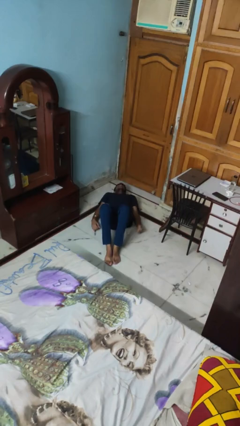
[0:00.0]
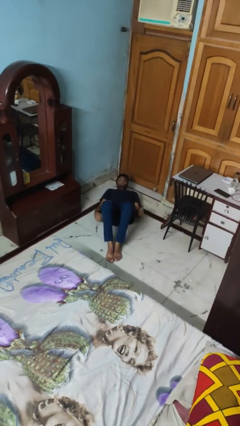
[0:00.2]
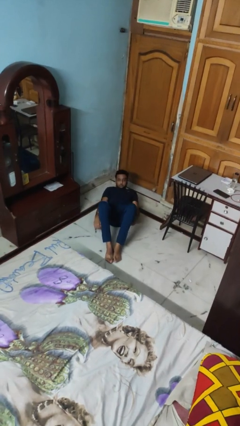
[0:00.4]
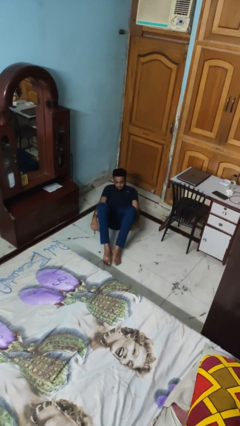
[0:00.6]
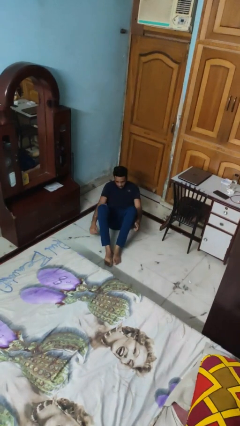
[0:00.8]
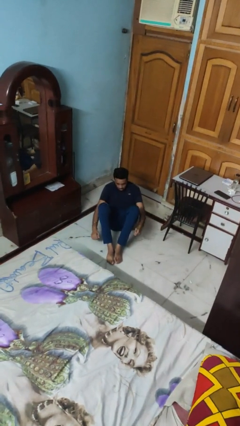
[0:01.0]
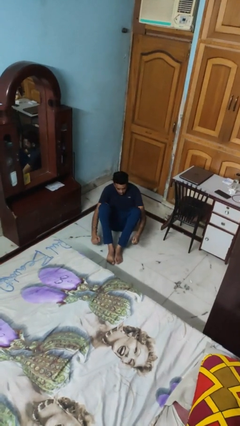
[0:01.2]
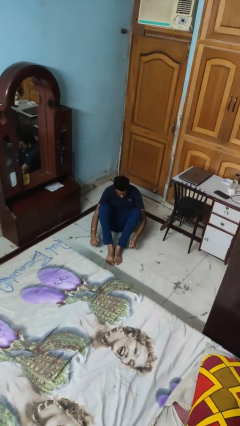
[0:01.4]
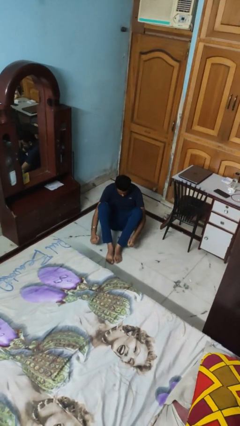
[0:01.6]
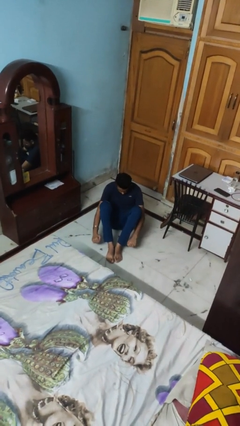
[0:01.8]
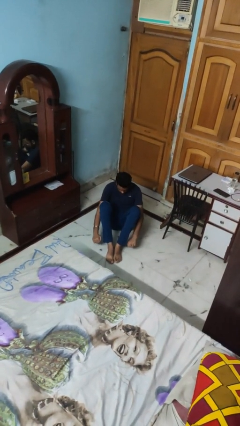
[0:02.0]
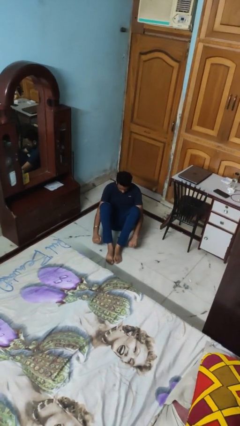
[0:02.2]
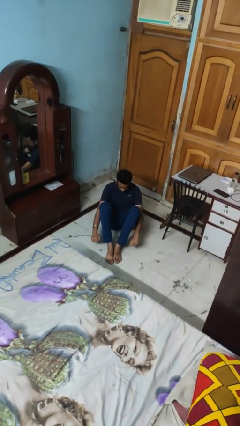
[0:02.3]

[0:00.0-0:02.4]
person exercises with situp

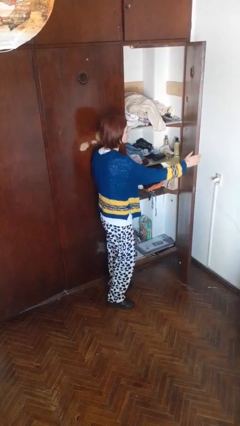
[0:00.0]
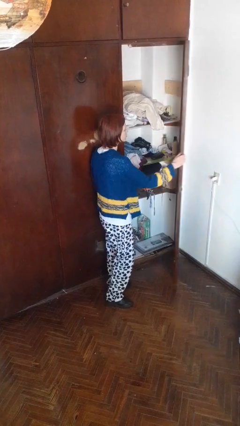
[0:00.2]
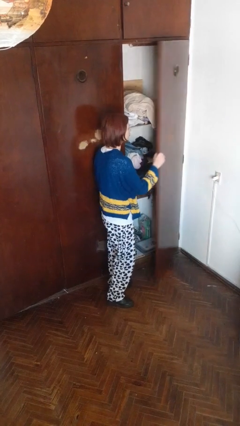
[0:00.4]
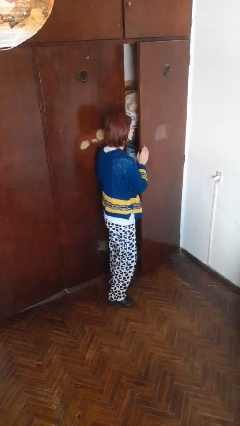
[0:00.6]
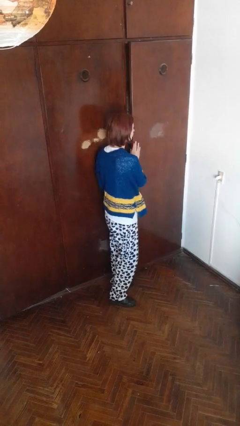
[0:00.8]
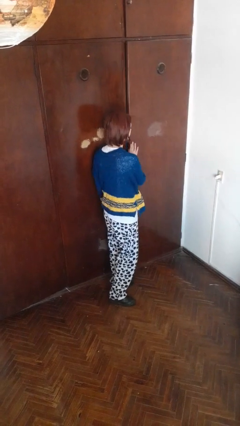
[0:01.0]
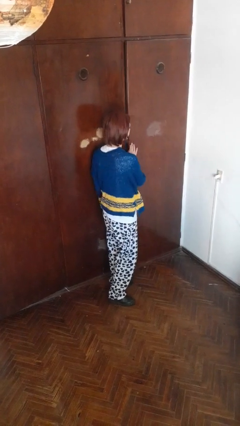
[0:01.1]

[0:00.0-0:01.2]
person closes closet door

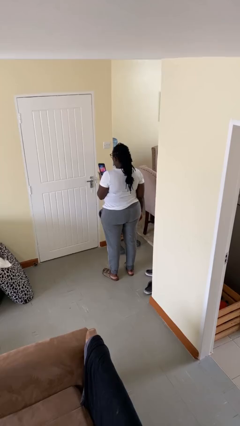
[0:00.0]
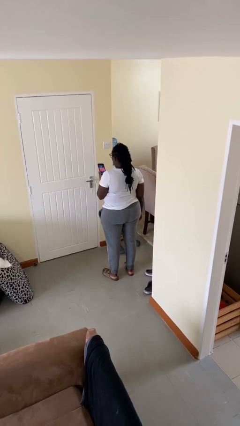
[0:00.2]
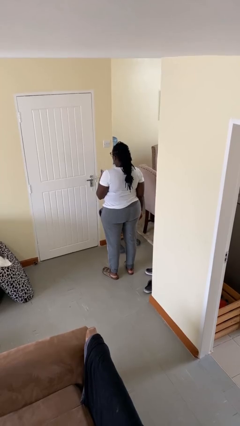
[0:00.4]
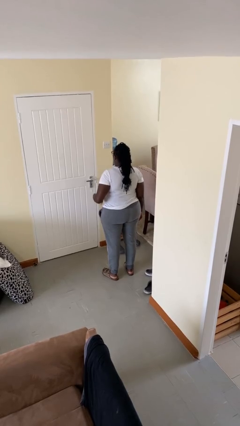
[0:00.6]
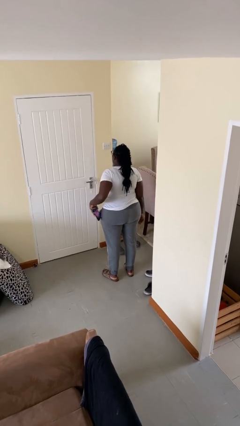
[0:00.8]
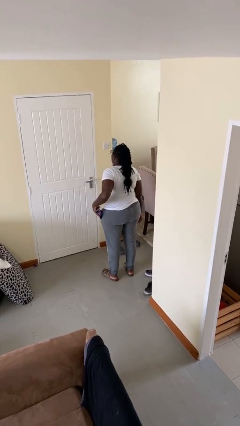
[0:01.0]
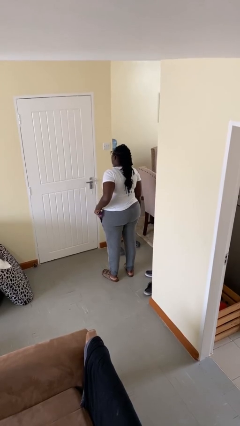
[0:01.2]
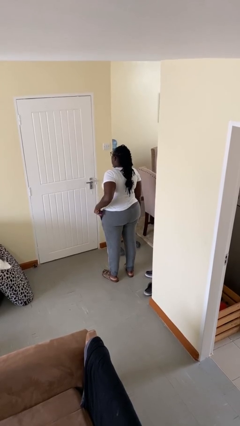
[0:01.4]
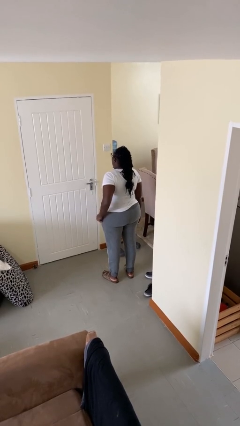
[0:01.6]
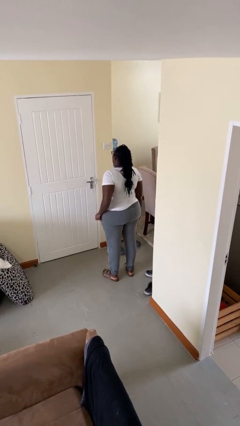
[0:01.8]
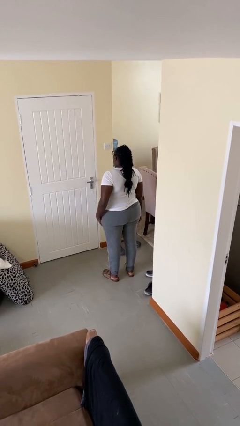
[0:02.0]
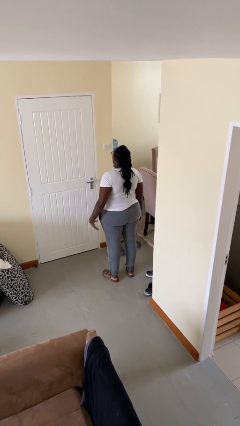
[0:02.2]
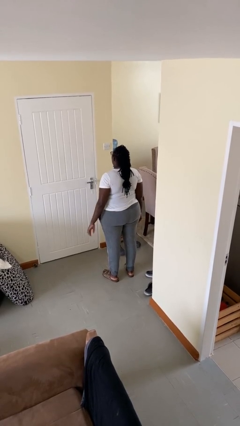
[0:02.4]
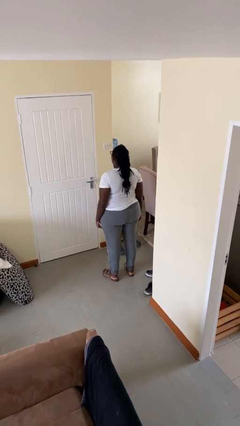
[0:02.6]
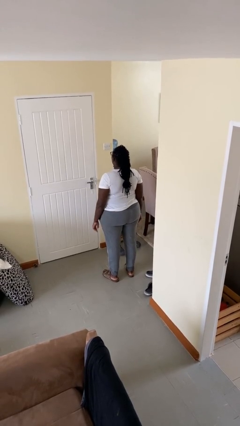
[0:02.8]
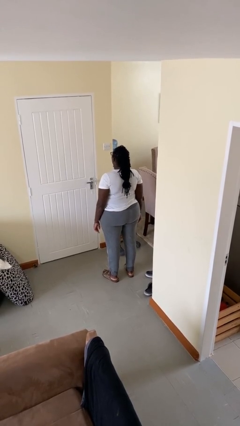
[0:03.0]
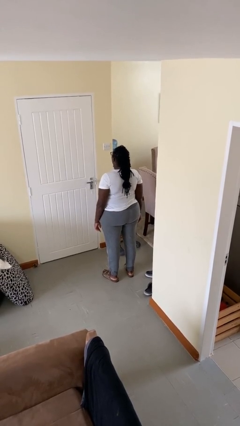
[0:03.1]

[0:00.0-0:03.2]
person puts phone into pocket

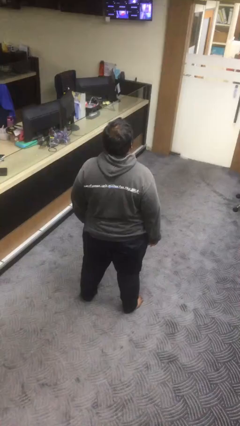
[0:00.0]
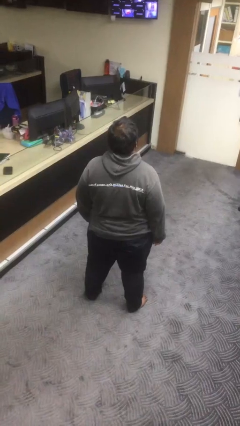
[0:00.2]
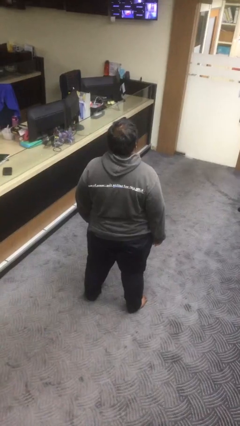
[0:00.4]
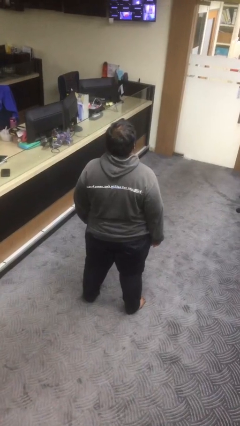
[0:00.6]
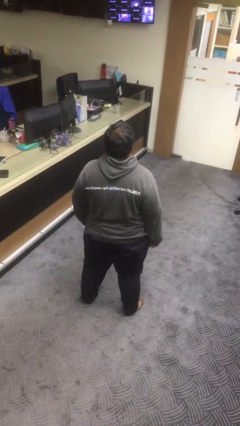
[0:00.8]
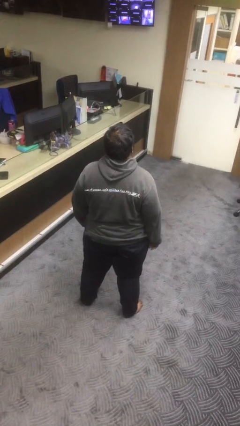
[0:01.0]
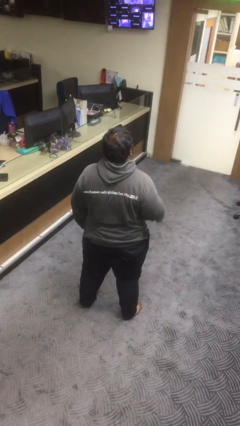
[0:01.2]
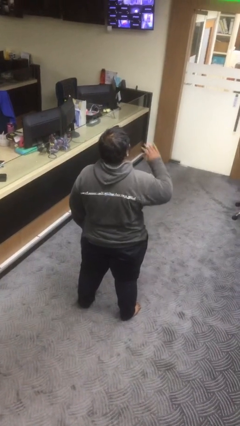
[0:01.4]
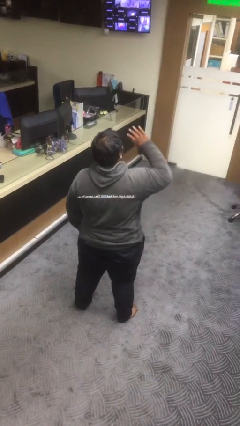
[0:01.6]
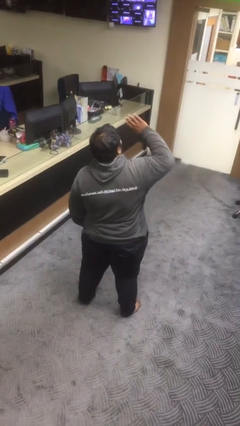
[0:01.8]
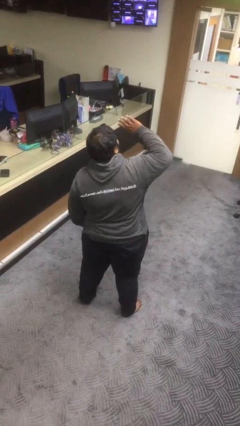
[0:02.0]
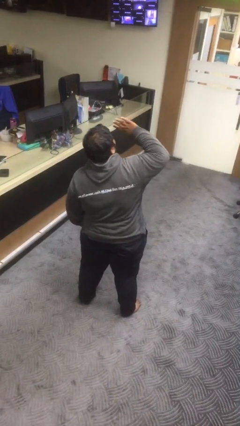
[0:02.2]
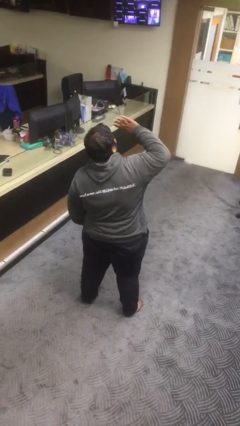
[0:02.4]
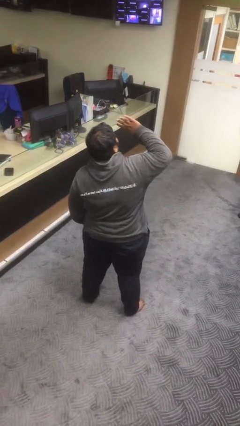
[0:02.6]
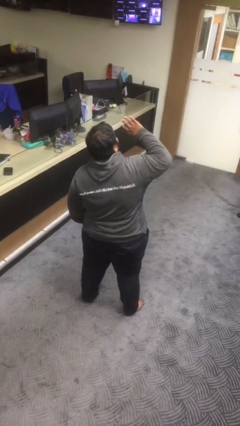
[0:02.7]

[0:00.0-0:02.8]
person shades eyes

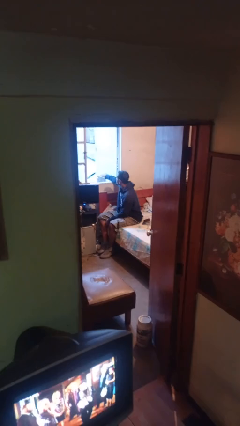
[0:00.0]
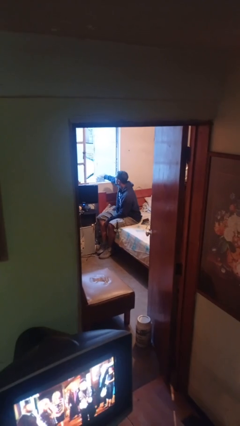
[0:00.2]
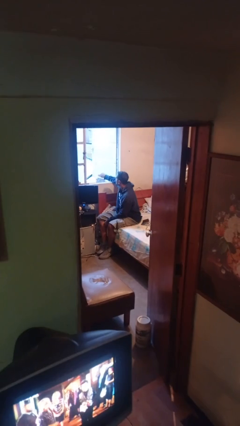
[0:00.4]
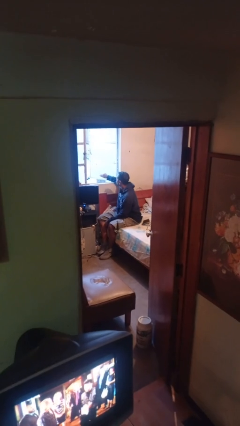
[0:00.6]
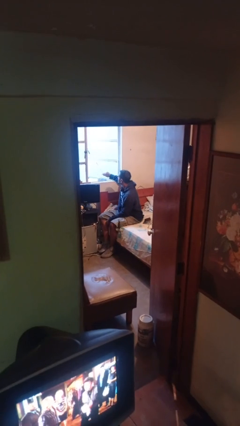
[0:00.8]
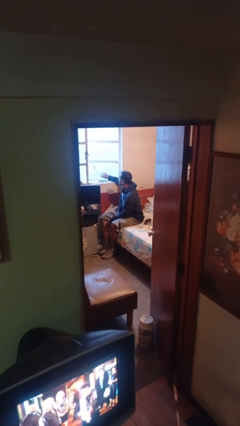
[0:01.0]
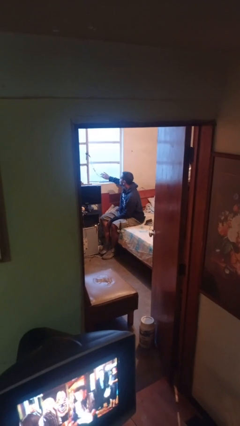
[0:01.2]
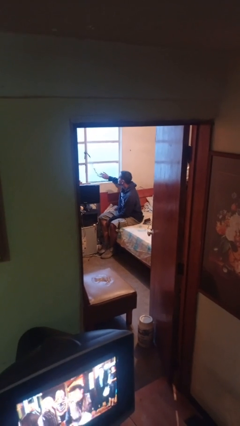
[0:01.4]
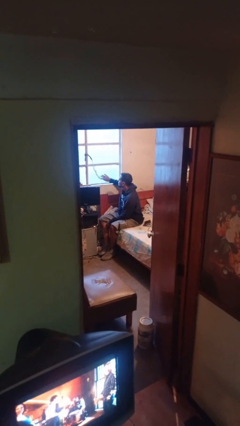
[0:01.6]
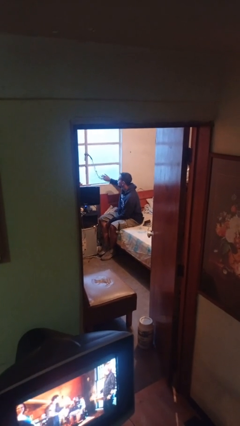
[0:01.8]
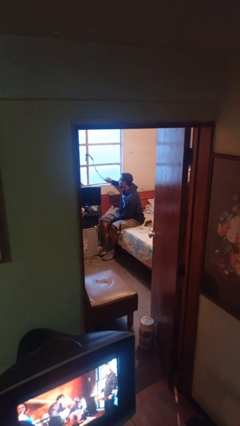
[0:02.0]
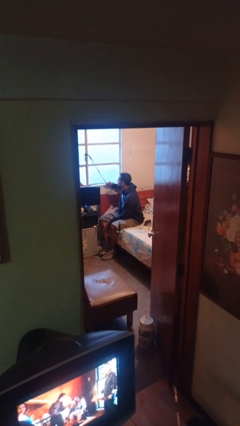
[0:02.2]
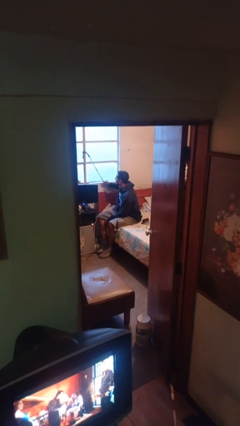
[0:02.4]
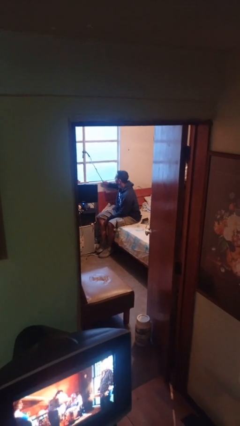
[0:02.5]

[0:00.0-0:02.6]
person closes home window

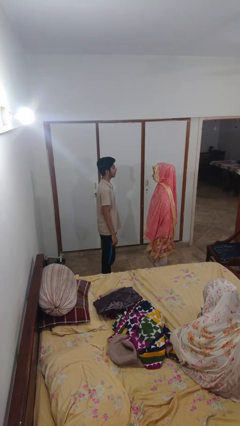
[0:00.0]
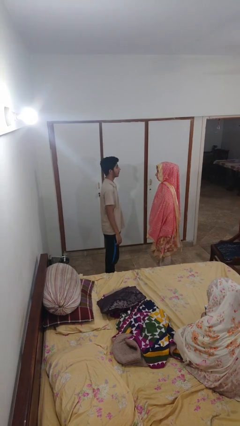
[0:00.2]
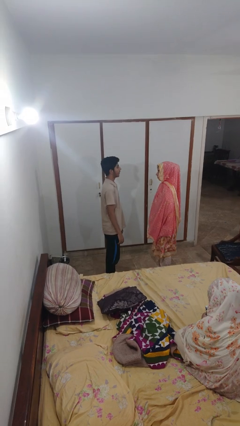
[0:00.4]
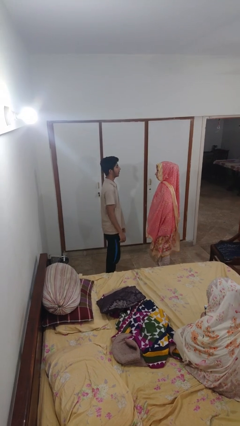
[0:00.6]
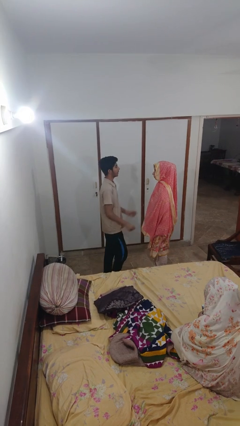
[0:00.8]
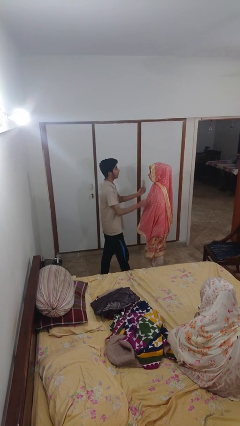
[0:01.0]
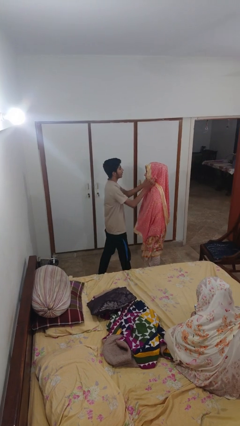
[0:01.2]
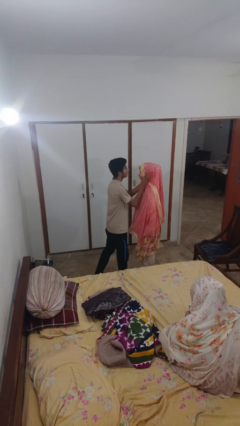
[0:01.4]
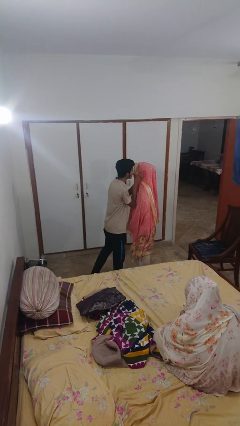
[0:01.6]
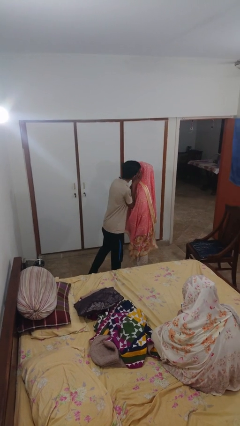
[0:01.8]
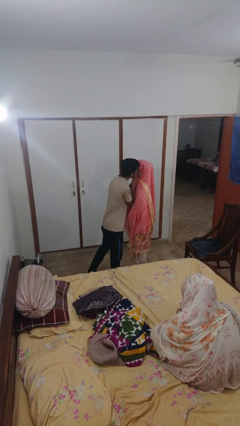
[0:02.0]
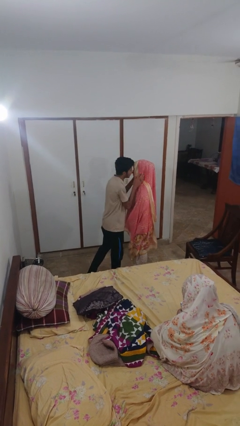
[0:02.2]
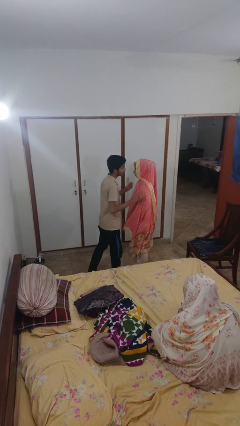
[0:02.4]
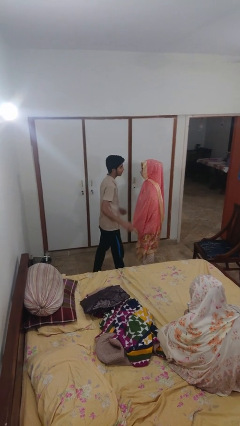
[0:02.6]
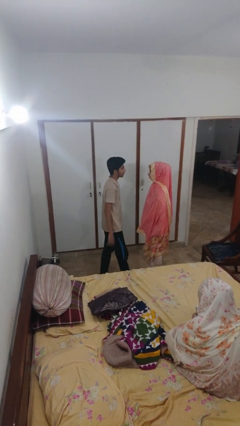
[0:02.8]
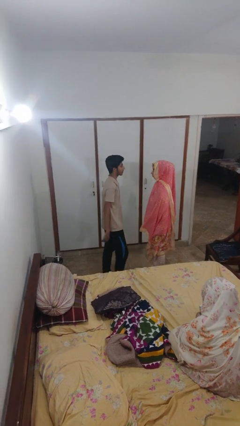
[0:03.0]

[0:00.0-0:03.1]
person kisses cheek of person

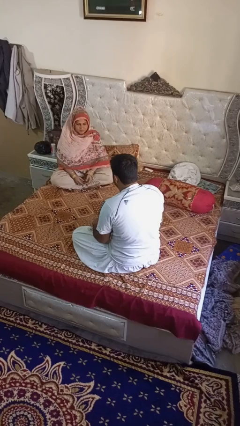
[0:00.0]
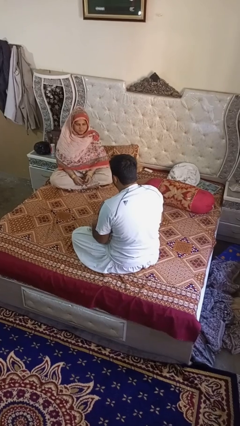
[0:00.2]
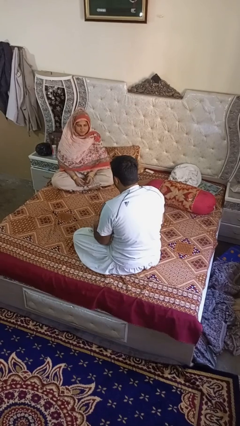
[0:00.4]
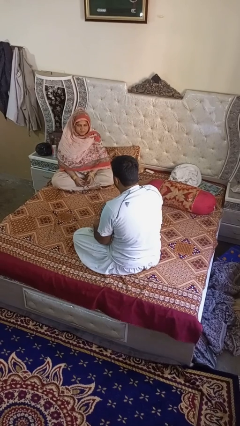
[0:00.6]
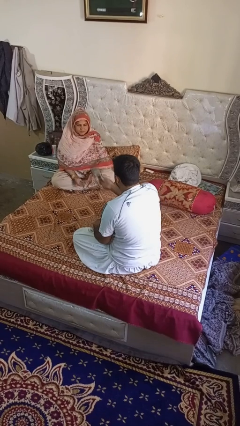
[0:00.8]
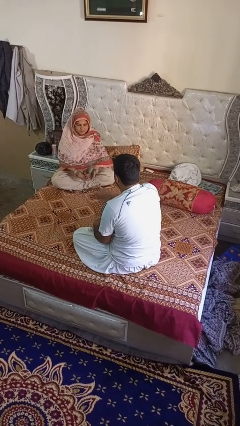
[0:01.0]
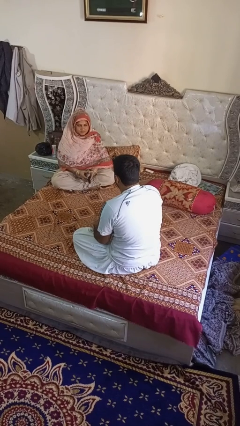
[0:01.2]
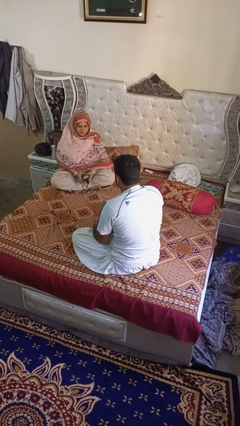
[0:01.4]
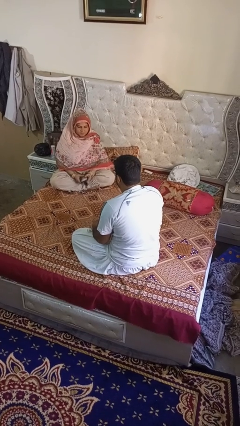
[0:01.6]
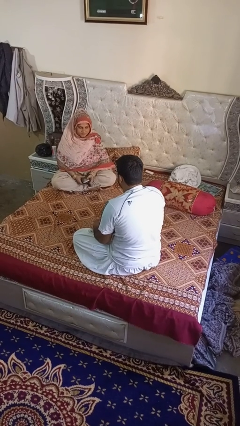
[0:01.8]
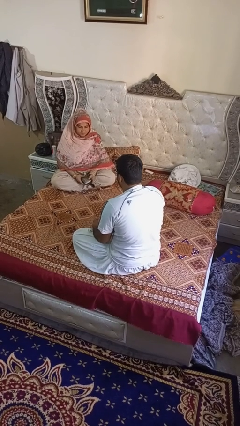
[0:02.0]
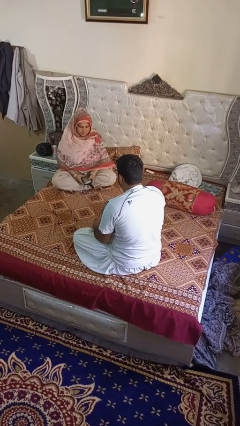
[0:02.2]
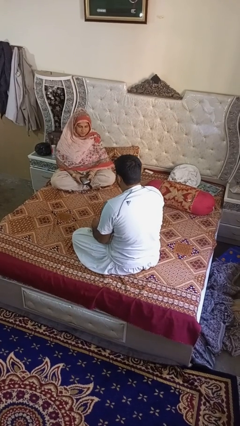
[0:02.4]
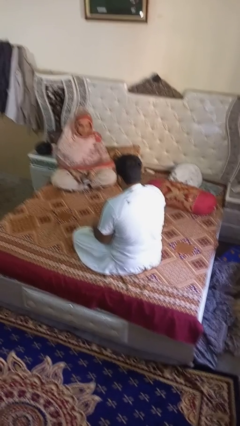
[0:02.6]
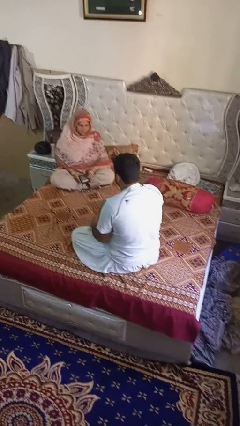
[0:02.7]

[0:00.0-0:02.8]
person throws object to person
